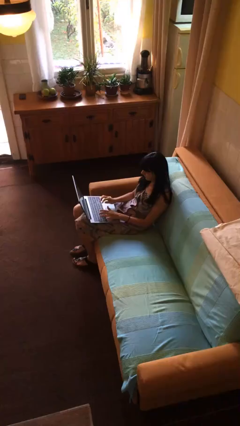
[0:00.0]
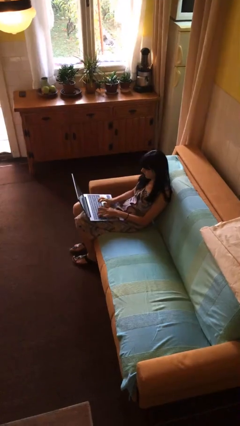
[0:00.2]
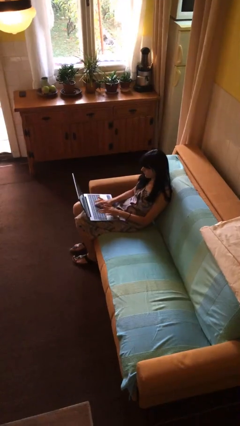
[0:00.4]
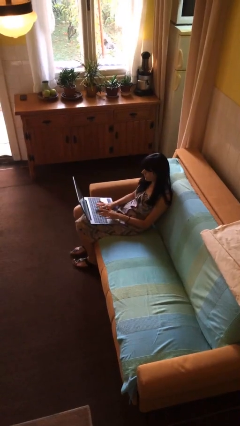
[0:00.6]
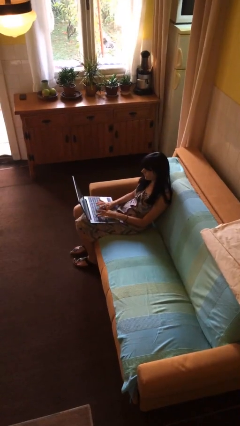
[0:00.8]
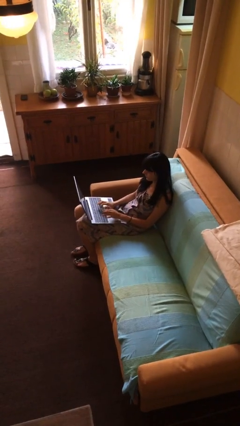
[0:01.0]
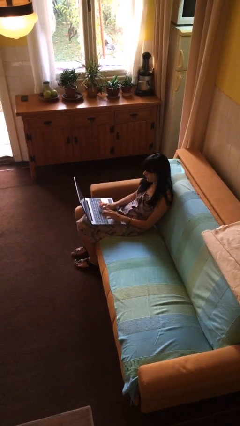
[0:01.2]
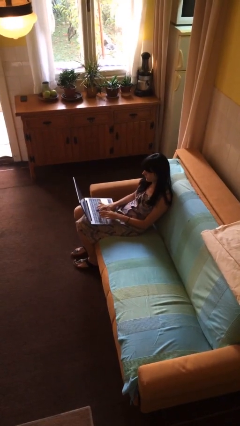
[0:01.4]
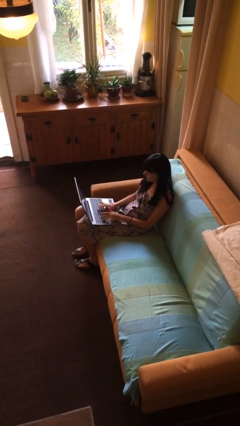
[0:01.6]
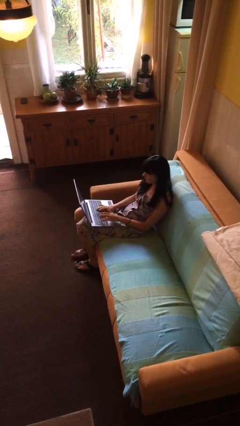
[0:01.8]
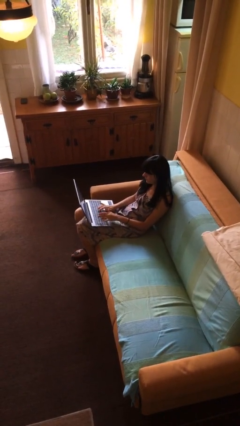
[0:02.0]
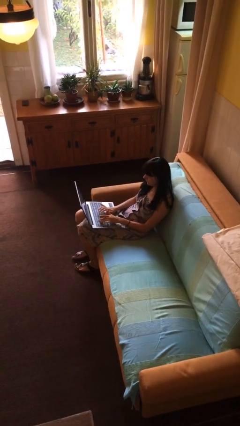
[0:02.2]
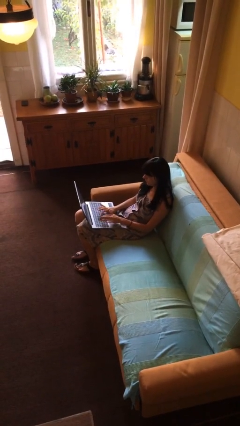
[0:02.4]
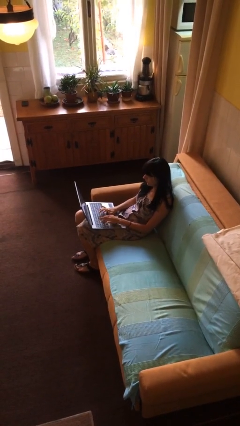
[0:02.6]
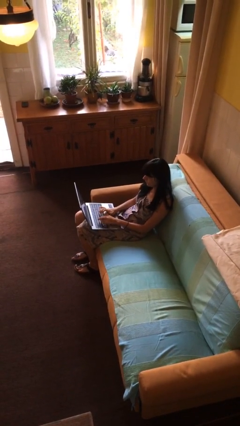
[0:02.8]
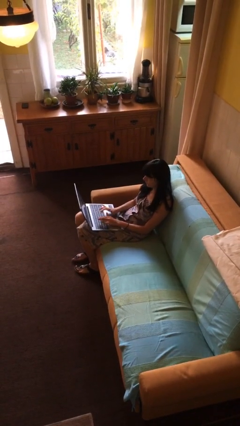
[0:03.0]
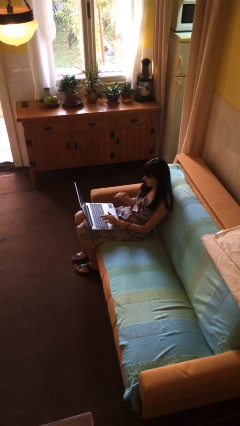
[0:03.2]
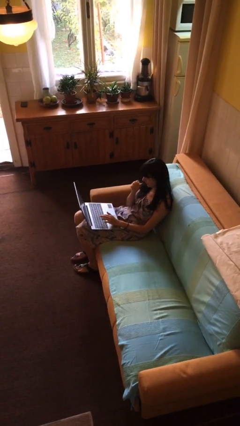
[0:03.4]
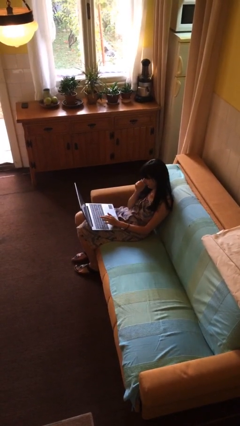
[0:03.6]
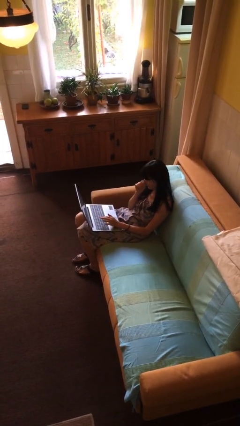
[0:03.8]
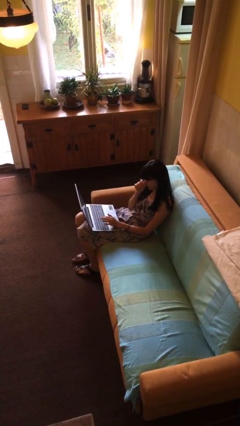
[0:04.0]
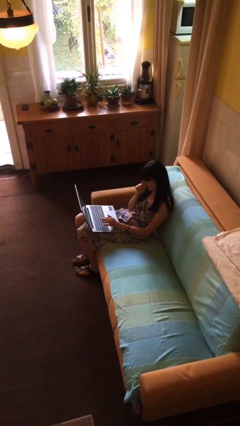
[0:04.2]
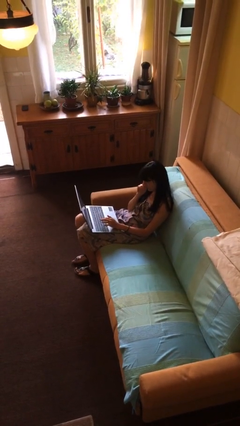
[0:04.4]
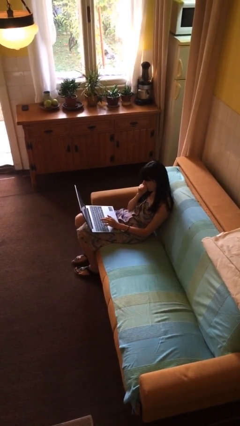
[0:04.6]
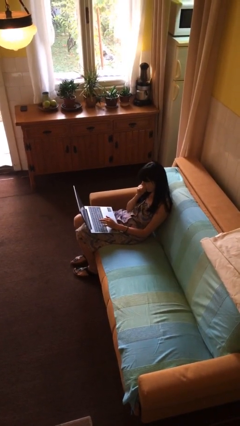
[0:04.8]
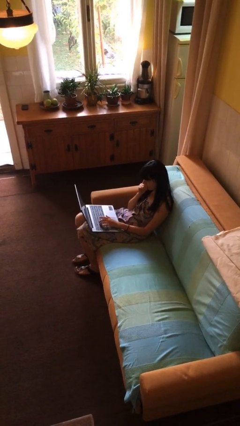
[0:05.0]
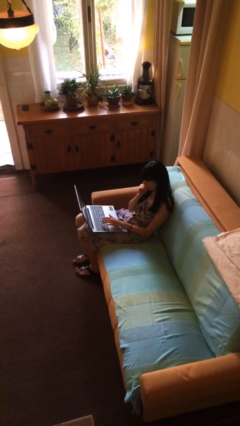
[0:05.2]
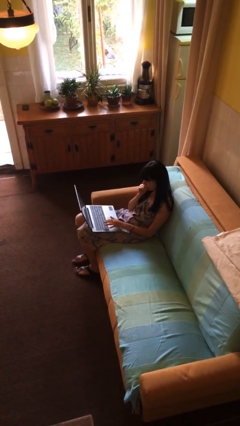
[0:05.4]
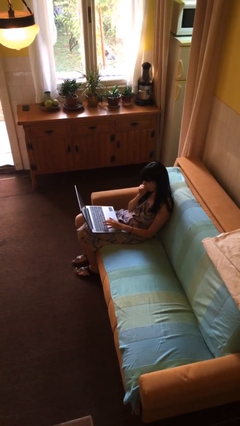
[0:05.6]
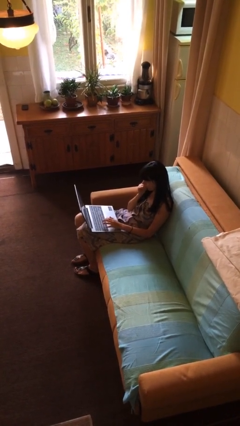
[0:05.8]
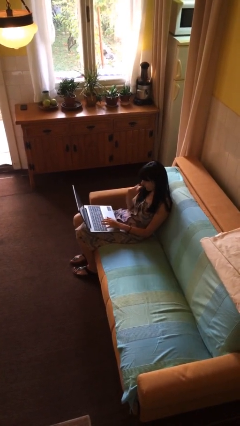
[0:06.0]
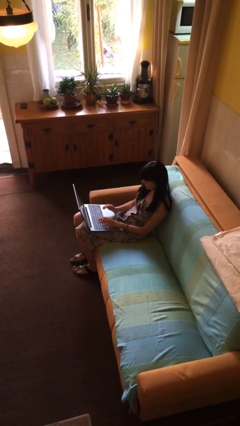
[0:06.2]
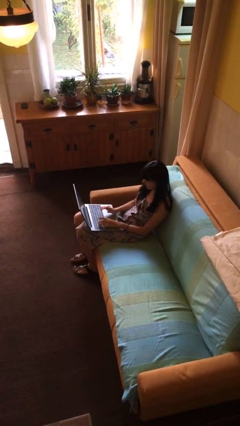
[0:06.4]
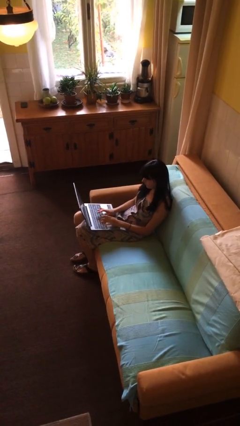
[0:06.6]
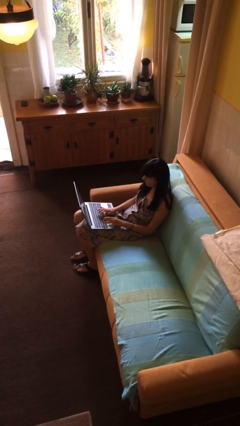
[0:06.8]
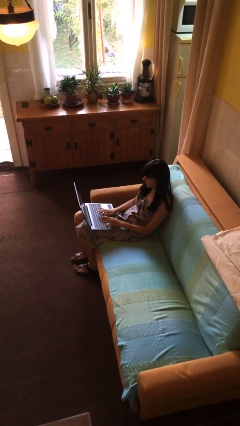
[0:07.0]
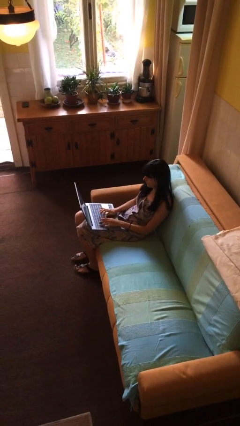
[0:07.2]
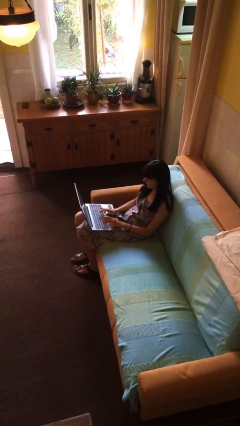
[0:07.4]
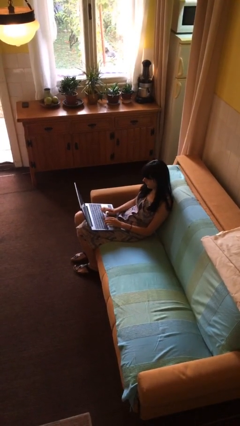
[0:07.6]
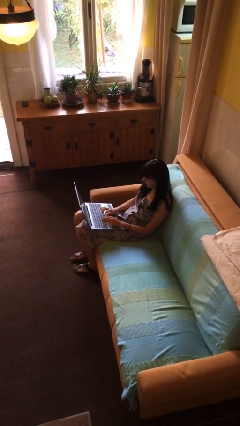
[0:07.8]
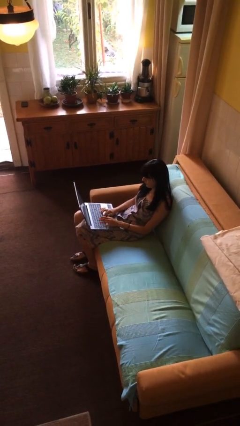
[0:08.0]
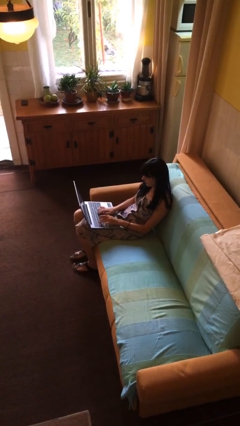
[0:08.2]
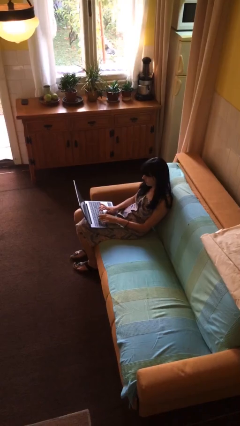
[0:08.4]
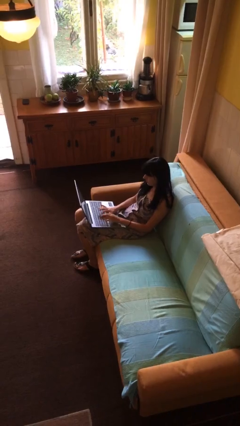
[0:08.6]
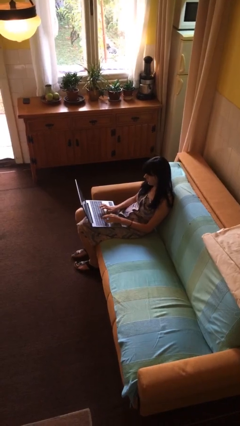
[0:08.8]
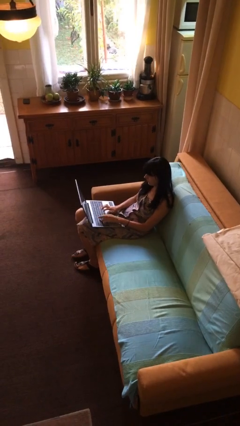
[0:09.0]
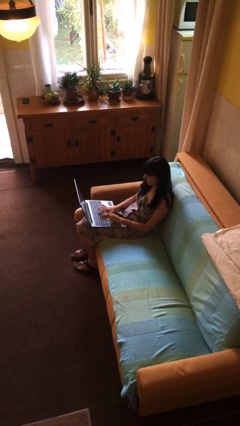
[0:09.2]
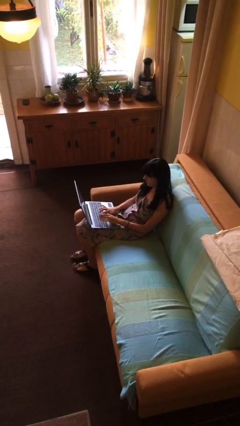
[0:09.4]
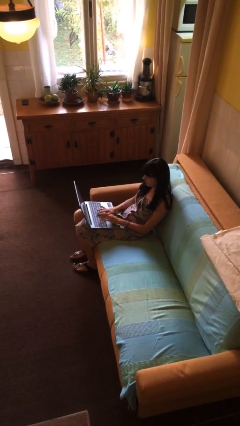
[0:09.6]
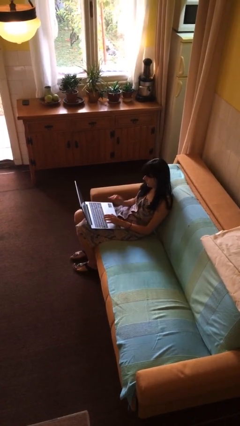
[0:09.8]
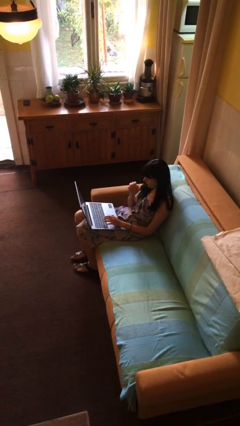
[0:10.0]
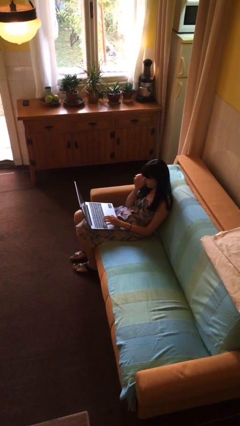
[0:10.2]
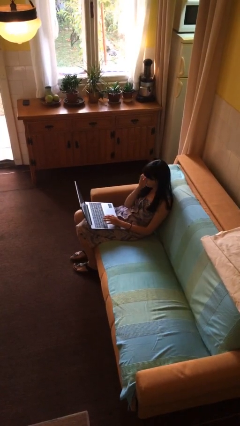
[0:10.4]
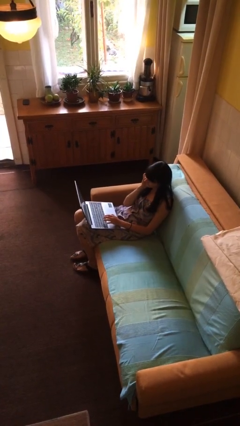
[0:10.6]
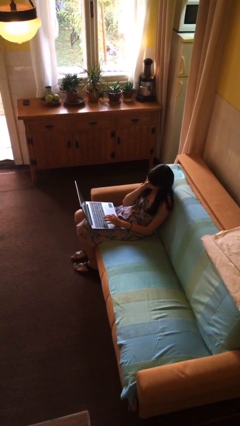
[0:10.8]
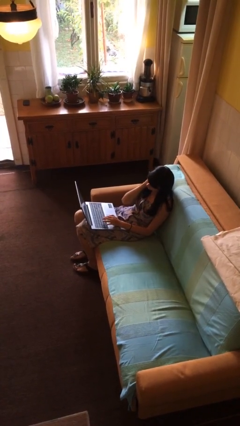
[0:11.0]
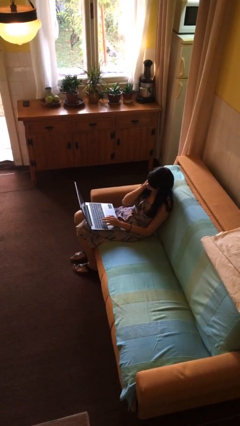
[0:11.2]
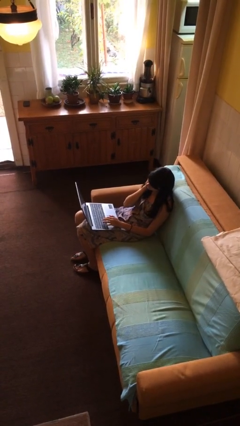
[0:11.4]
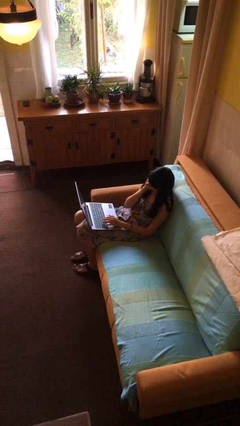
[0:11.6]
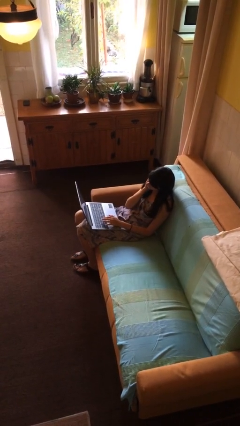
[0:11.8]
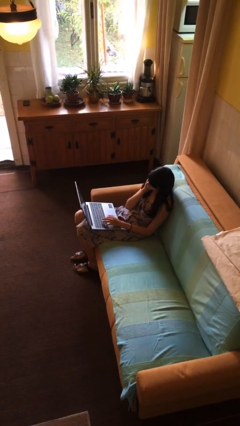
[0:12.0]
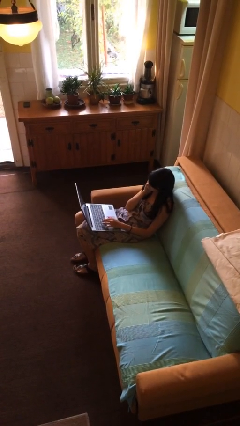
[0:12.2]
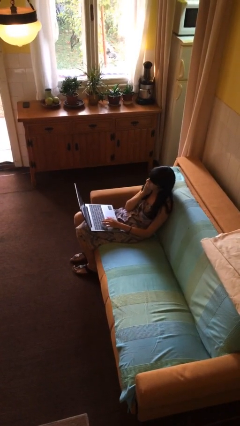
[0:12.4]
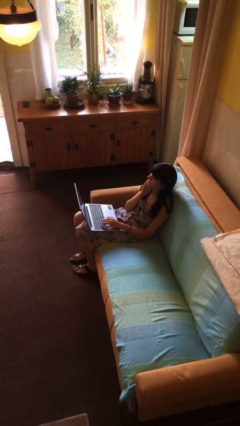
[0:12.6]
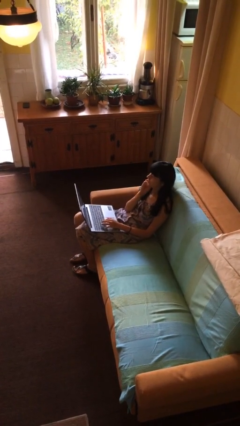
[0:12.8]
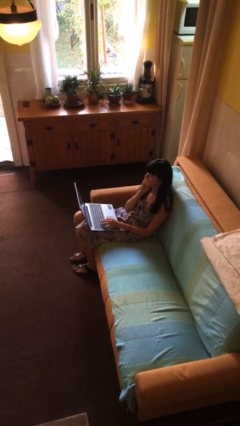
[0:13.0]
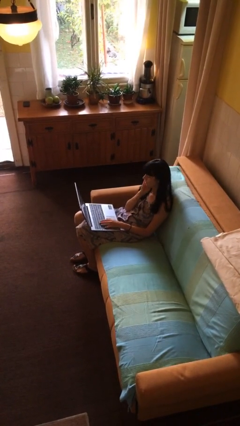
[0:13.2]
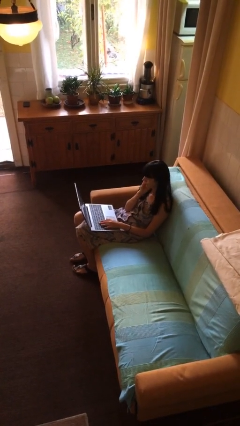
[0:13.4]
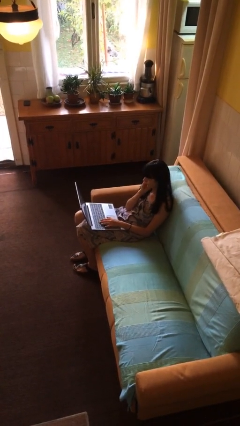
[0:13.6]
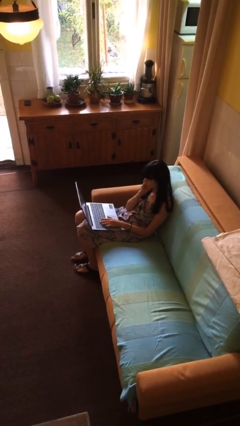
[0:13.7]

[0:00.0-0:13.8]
person interacts with laptop

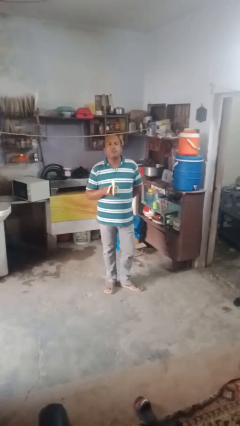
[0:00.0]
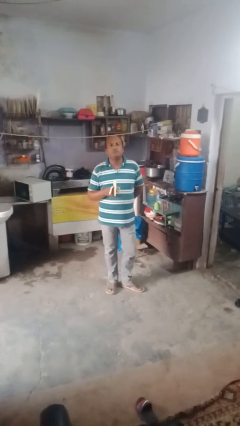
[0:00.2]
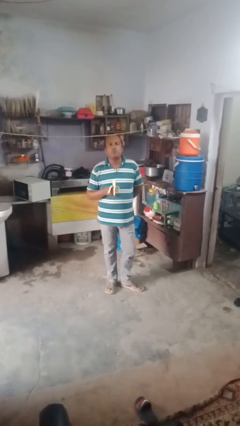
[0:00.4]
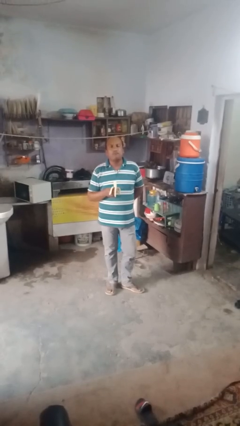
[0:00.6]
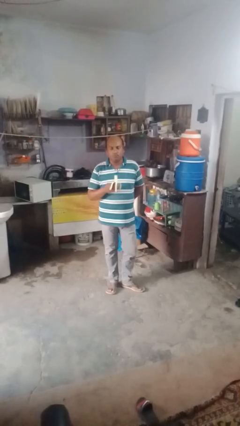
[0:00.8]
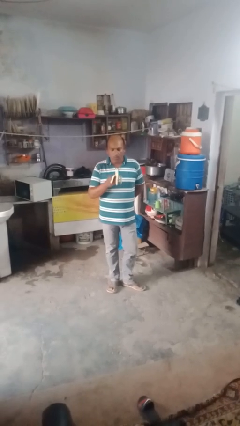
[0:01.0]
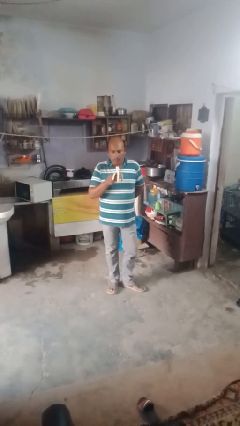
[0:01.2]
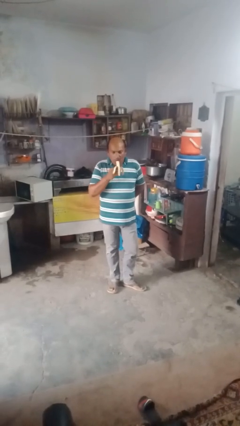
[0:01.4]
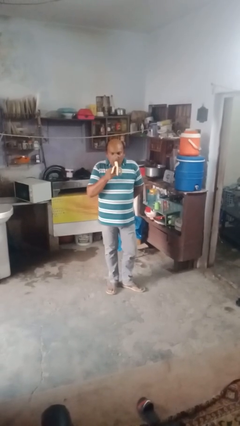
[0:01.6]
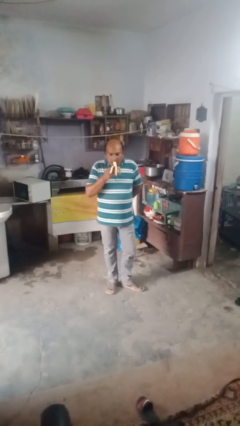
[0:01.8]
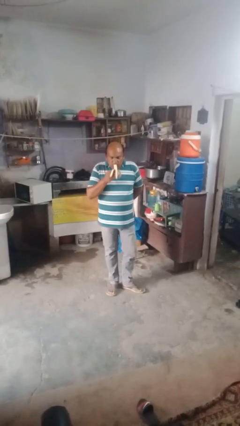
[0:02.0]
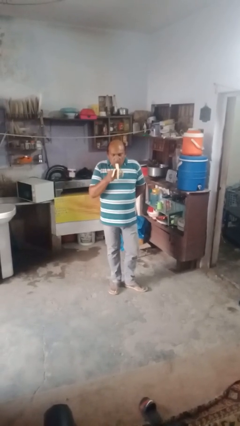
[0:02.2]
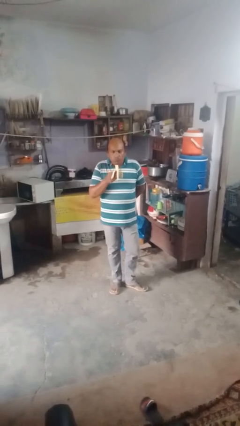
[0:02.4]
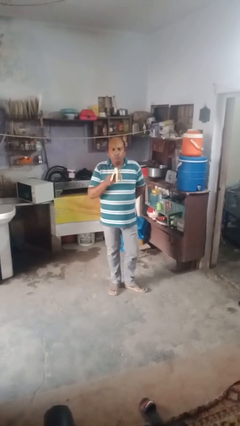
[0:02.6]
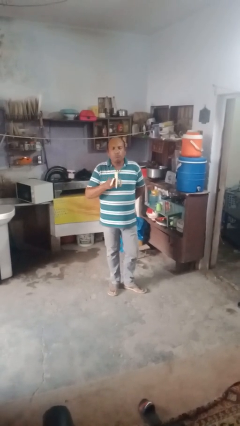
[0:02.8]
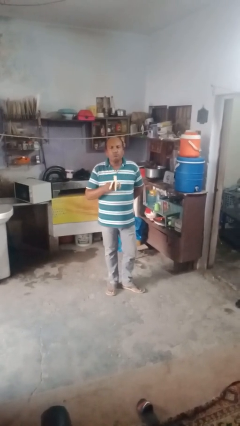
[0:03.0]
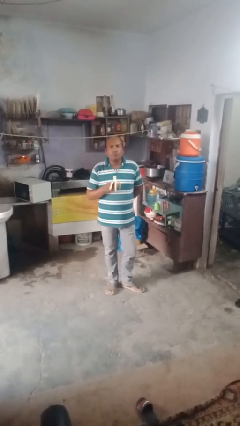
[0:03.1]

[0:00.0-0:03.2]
person eats banana

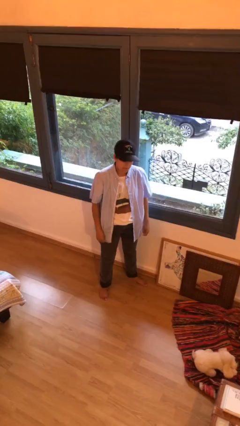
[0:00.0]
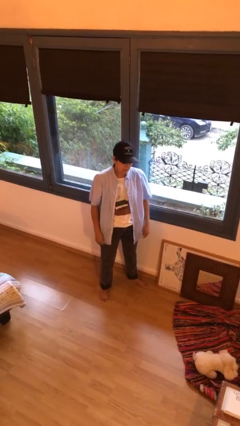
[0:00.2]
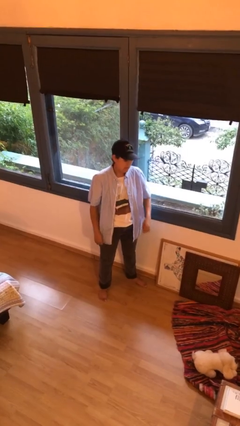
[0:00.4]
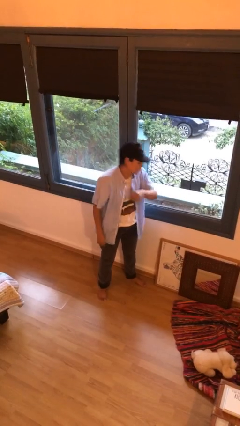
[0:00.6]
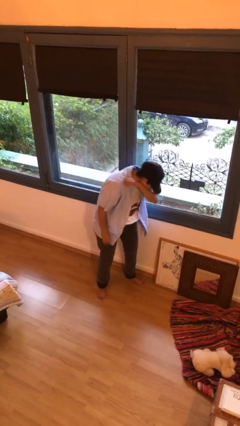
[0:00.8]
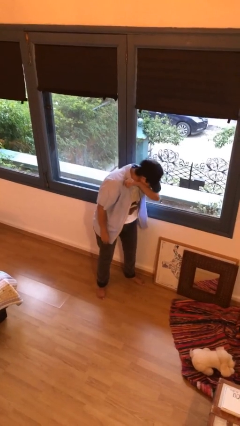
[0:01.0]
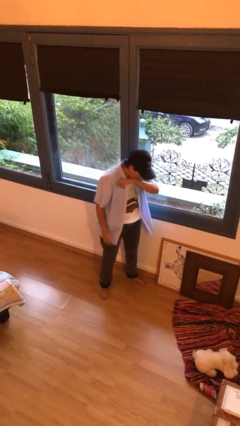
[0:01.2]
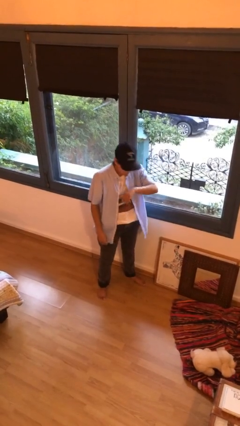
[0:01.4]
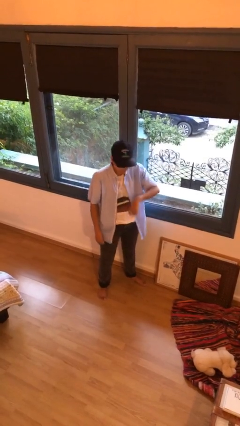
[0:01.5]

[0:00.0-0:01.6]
person sneezes into arm
